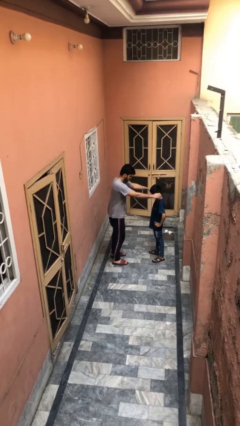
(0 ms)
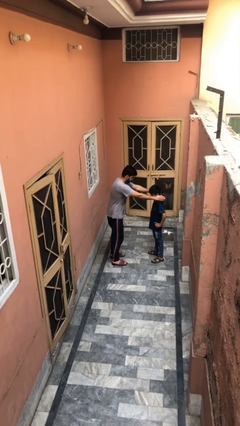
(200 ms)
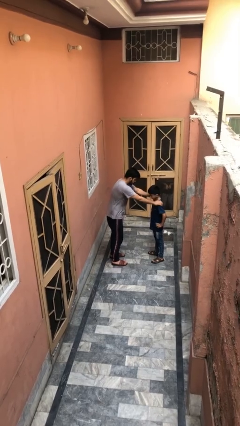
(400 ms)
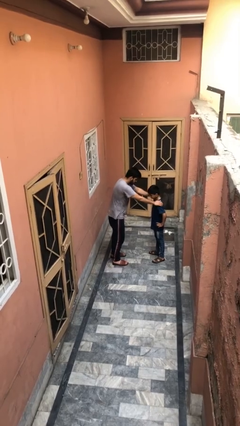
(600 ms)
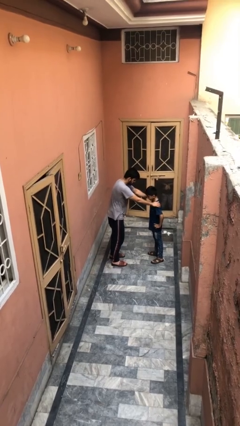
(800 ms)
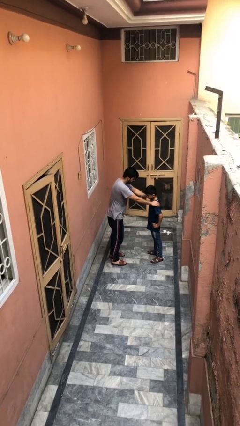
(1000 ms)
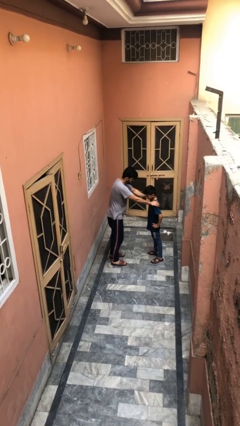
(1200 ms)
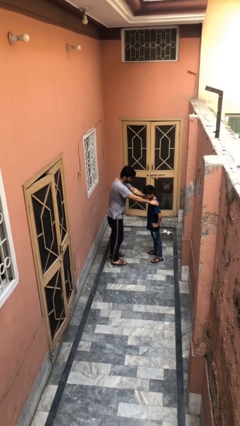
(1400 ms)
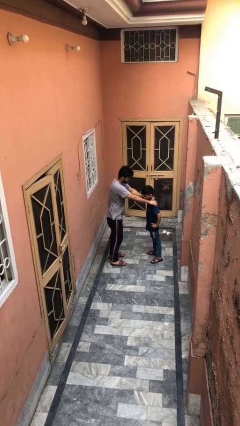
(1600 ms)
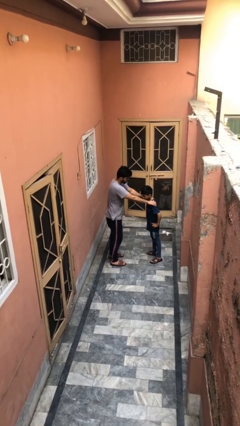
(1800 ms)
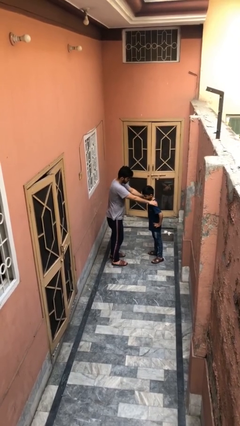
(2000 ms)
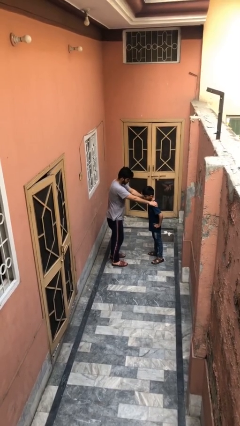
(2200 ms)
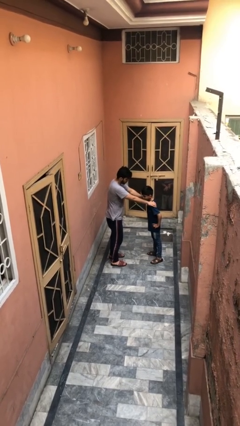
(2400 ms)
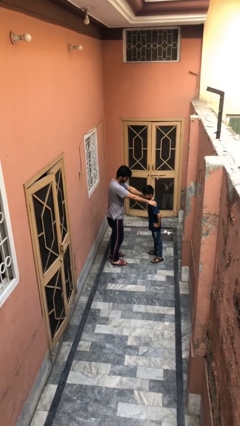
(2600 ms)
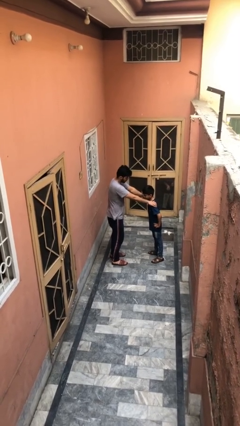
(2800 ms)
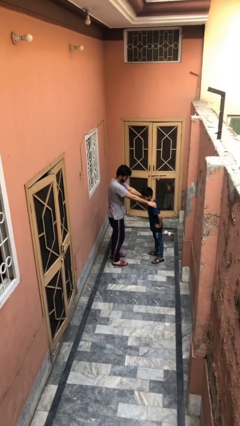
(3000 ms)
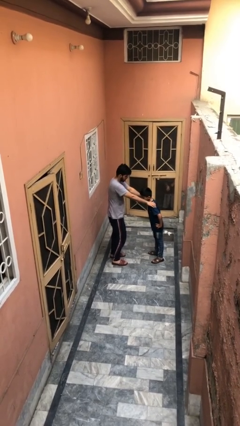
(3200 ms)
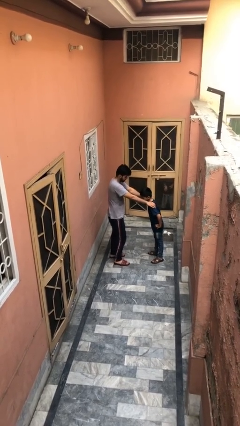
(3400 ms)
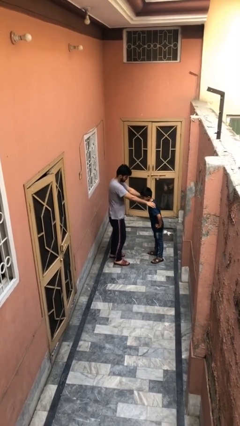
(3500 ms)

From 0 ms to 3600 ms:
person pounds shoulders of person

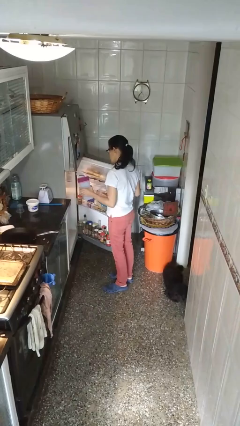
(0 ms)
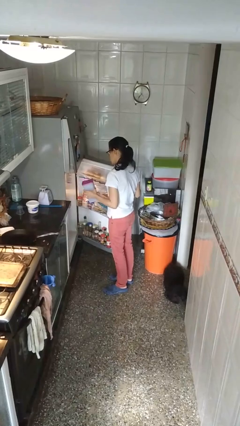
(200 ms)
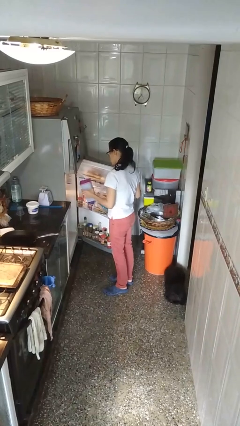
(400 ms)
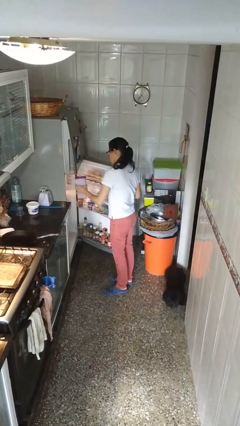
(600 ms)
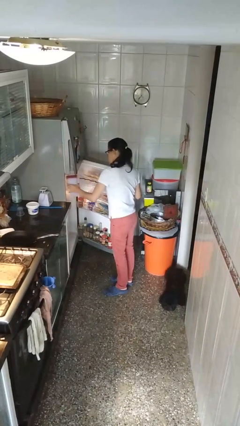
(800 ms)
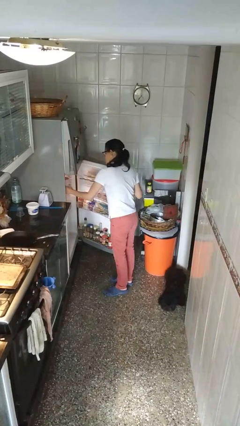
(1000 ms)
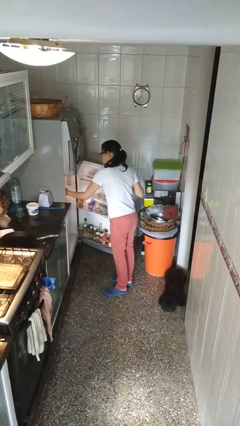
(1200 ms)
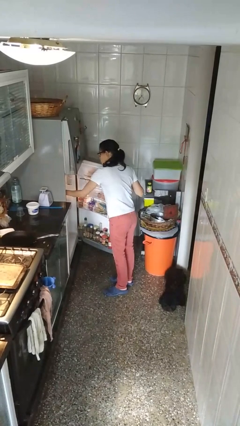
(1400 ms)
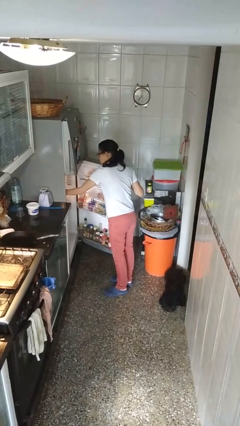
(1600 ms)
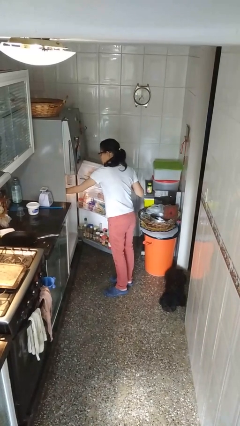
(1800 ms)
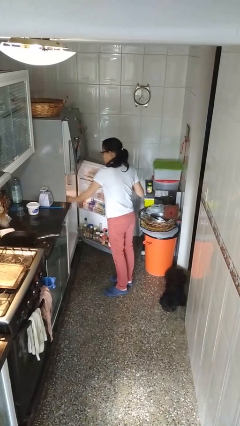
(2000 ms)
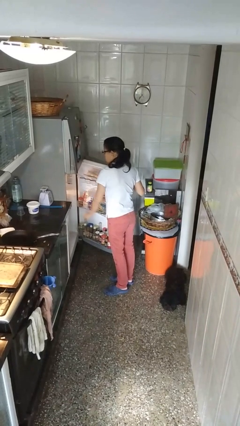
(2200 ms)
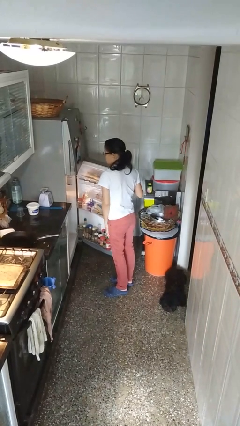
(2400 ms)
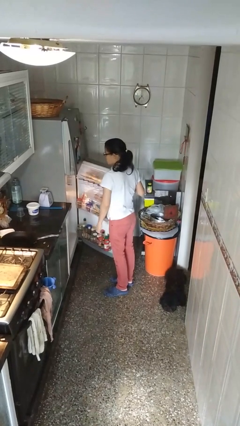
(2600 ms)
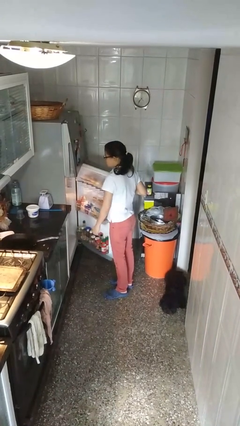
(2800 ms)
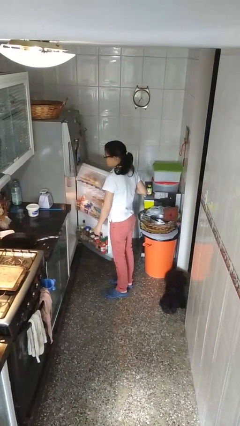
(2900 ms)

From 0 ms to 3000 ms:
person puts object into refrigerator

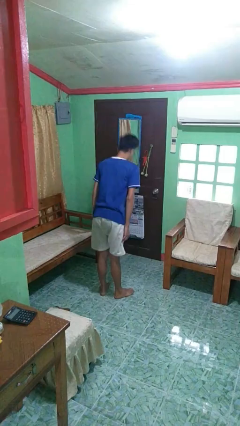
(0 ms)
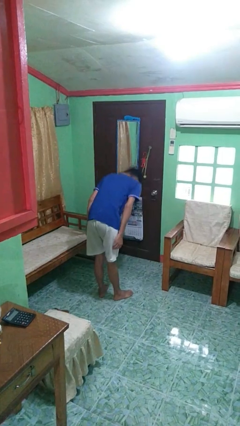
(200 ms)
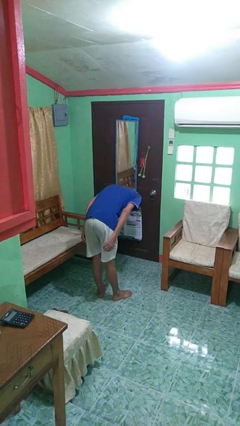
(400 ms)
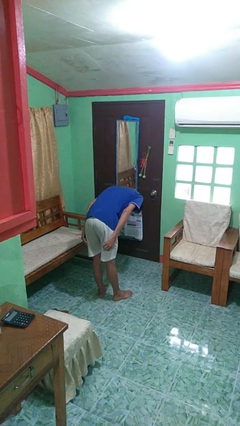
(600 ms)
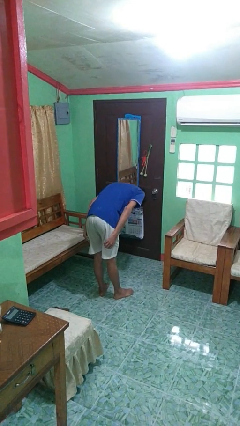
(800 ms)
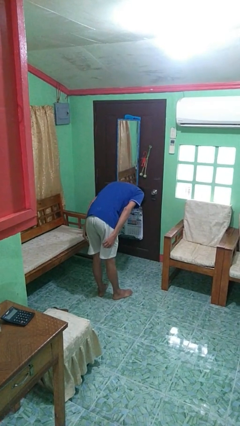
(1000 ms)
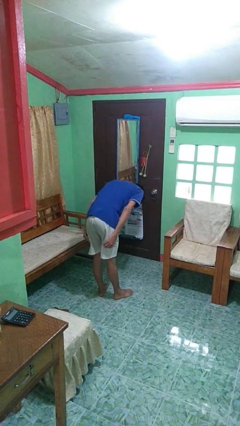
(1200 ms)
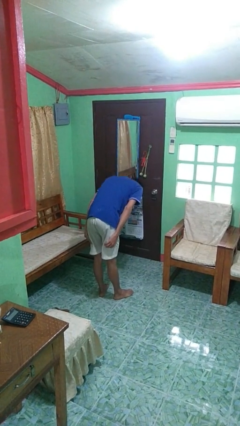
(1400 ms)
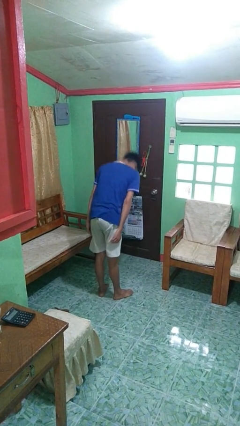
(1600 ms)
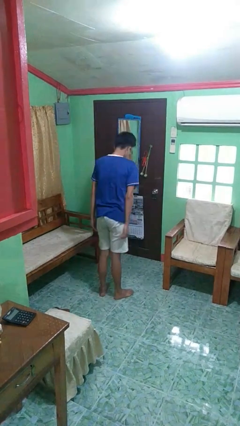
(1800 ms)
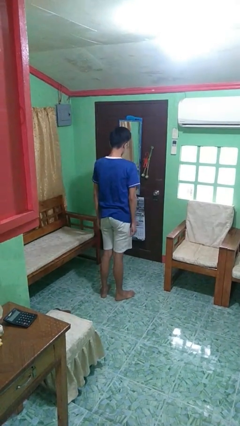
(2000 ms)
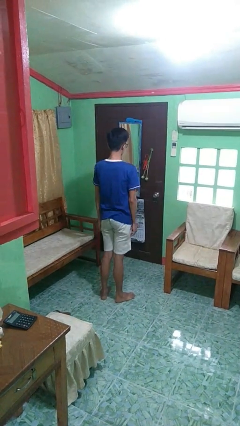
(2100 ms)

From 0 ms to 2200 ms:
person bows

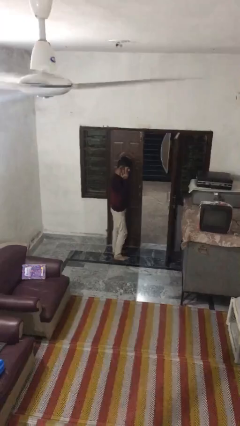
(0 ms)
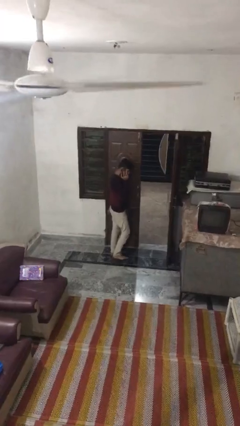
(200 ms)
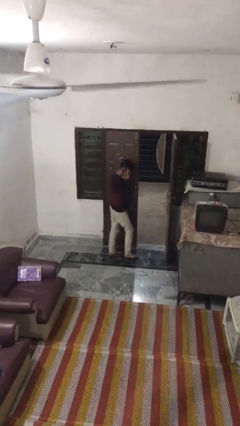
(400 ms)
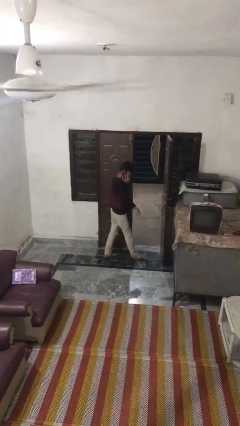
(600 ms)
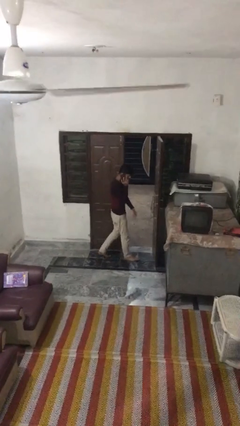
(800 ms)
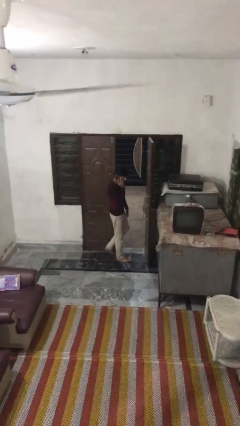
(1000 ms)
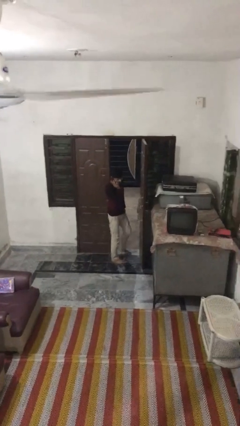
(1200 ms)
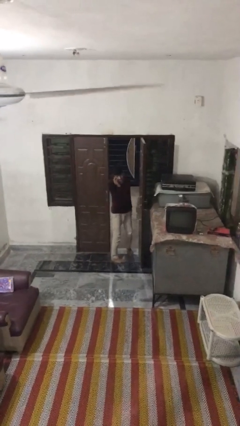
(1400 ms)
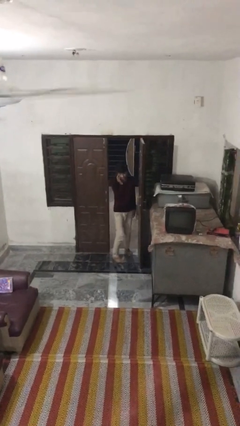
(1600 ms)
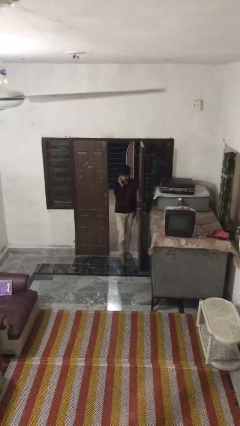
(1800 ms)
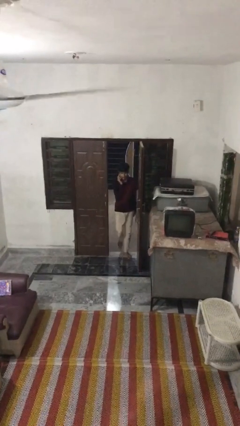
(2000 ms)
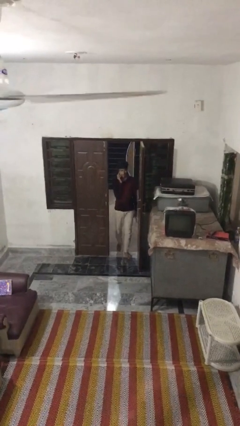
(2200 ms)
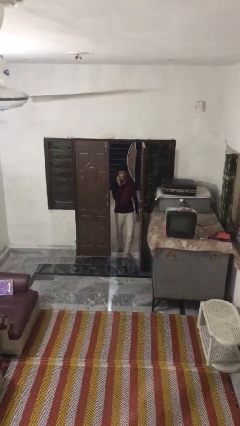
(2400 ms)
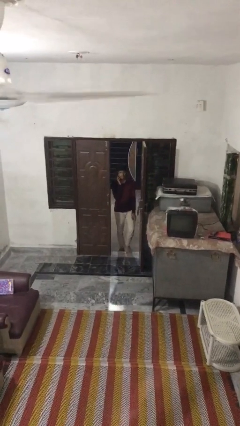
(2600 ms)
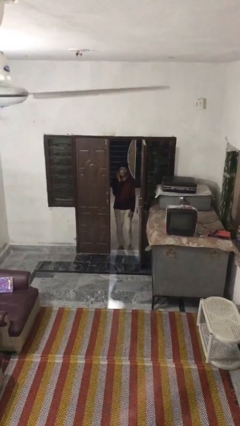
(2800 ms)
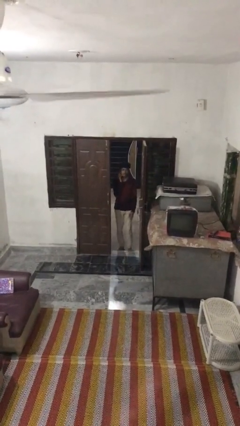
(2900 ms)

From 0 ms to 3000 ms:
person exits scene through structure

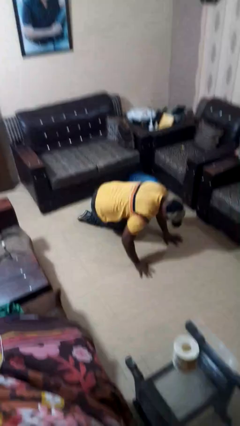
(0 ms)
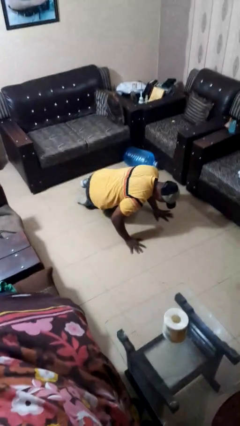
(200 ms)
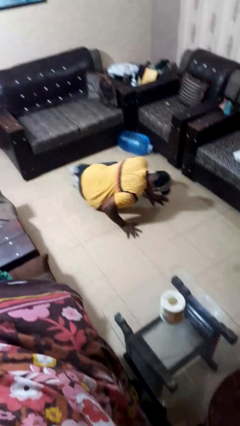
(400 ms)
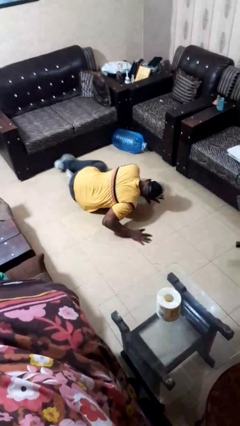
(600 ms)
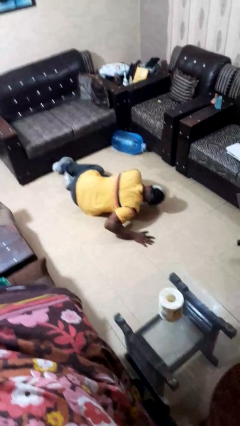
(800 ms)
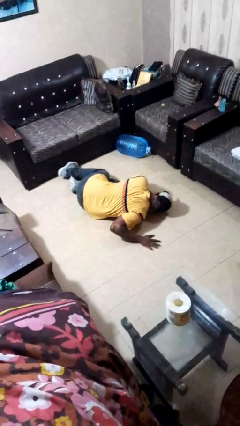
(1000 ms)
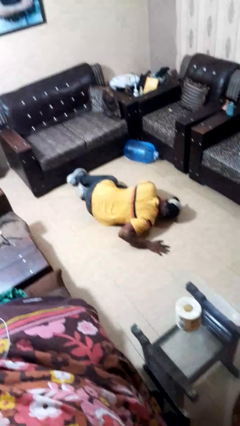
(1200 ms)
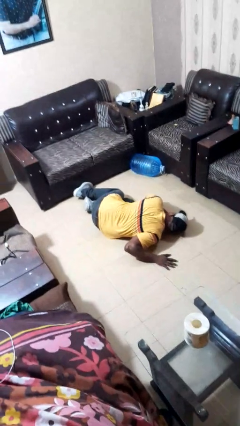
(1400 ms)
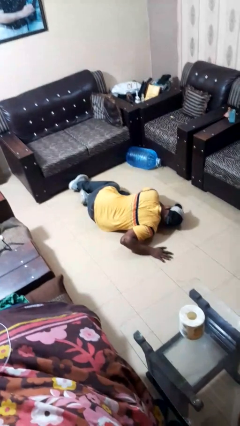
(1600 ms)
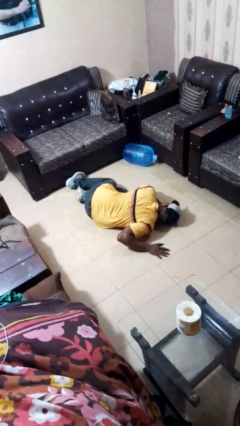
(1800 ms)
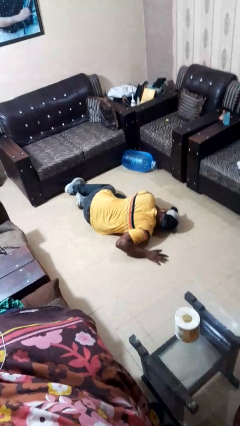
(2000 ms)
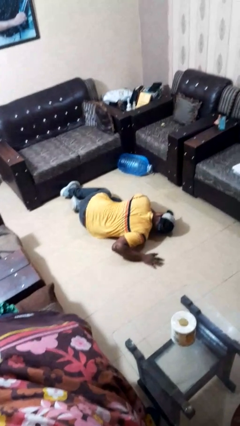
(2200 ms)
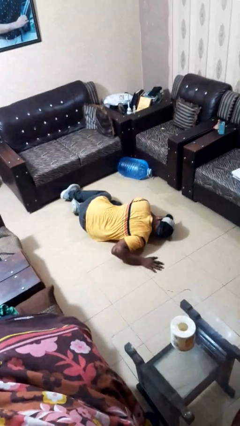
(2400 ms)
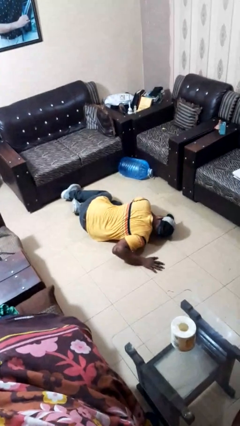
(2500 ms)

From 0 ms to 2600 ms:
person lies down on floor

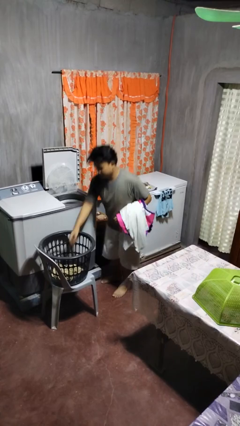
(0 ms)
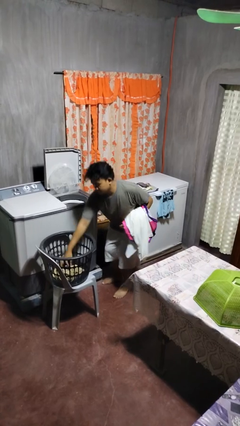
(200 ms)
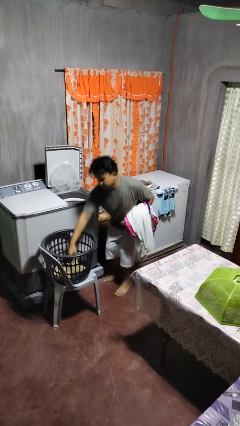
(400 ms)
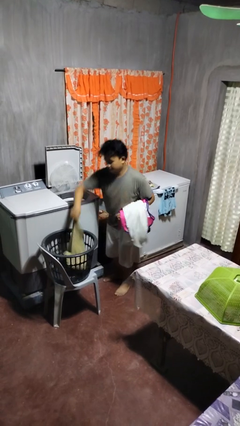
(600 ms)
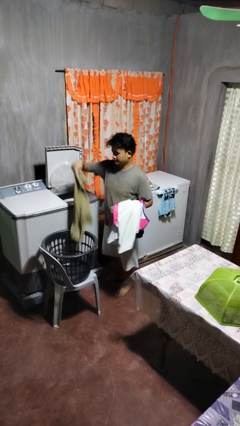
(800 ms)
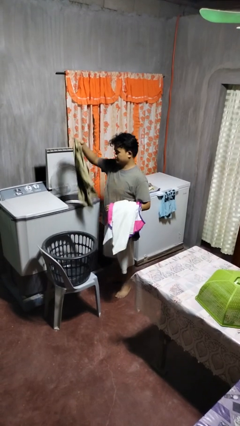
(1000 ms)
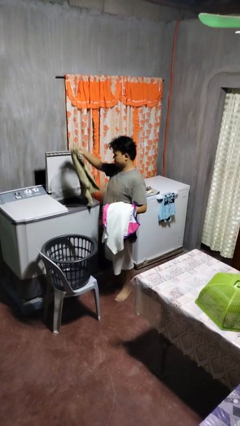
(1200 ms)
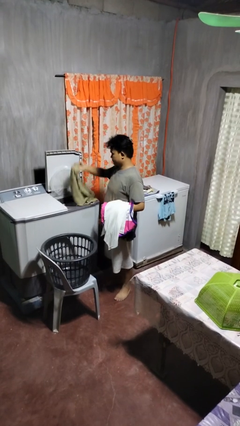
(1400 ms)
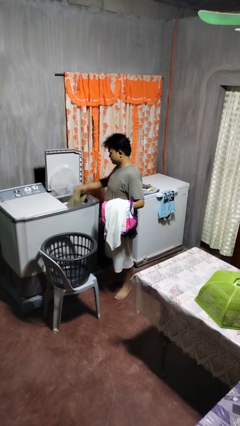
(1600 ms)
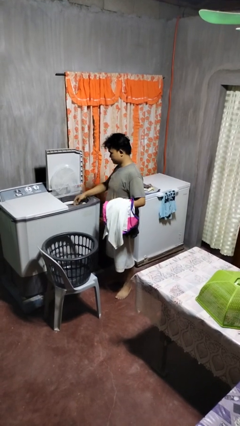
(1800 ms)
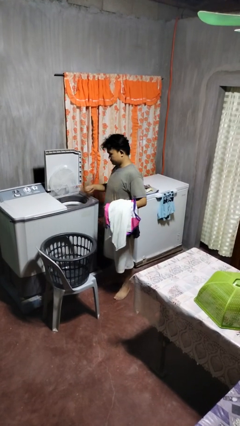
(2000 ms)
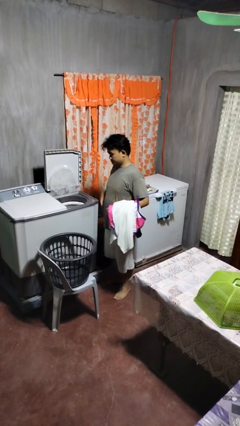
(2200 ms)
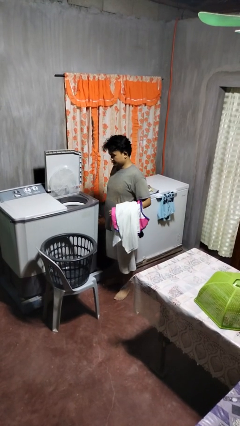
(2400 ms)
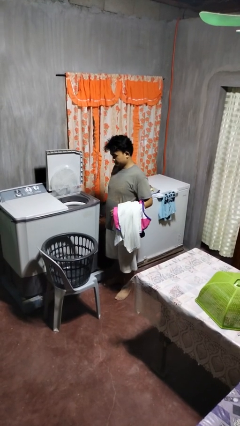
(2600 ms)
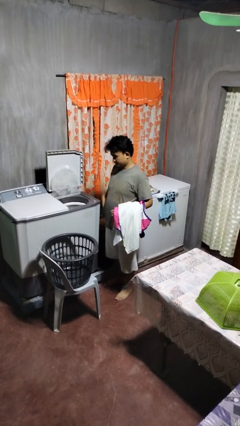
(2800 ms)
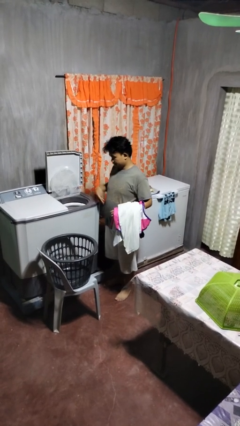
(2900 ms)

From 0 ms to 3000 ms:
person loads dryer

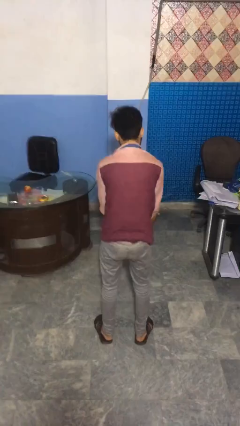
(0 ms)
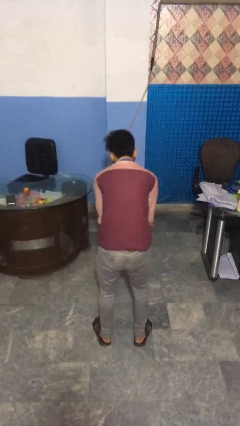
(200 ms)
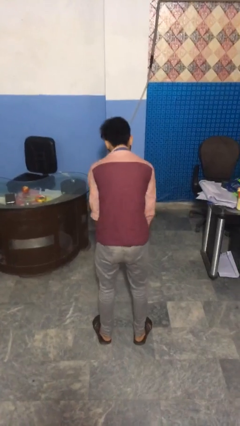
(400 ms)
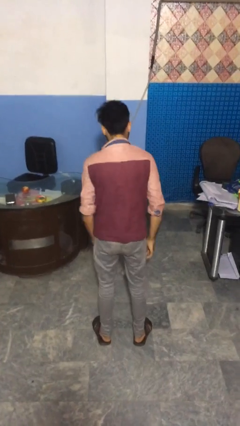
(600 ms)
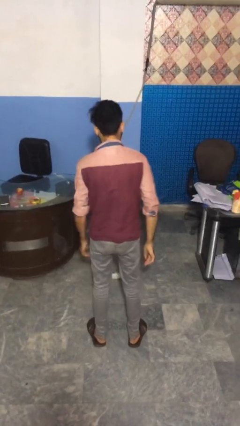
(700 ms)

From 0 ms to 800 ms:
person catches dropped object
